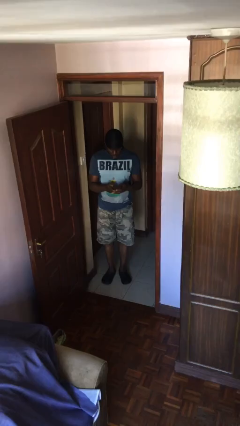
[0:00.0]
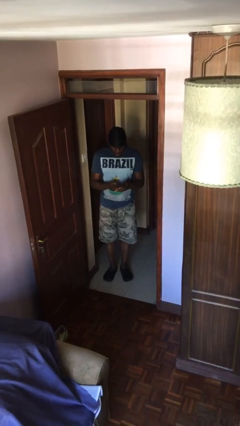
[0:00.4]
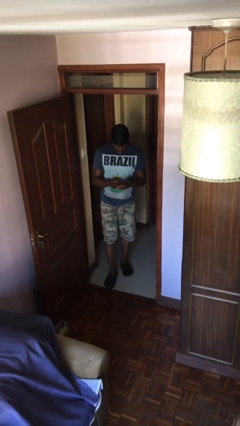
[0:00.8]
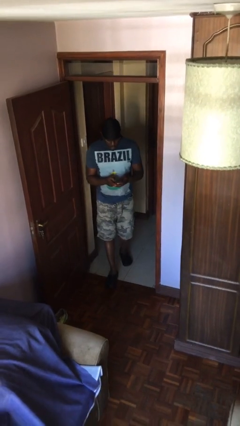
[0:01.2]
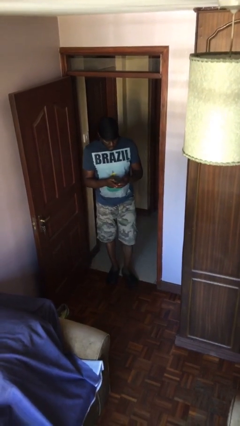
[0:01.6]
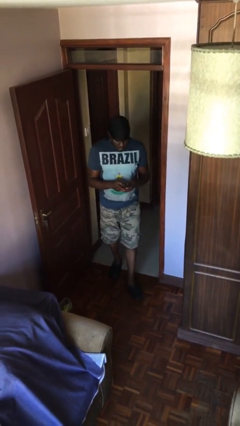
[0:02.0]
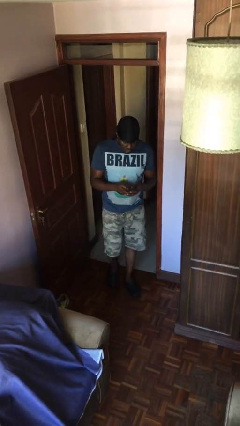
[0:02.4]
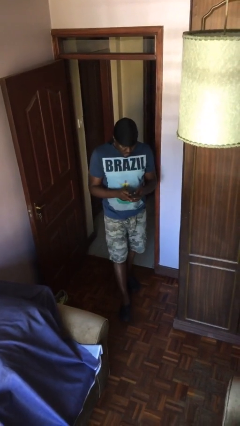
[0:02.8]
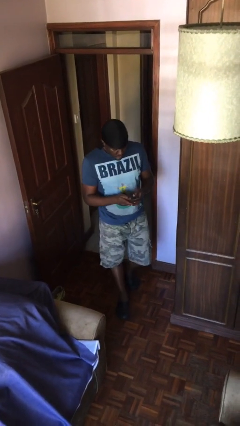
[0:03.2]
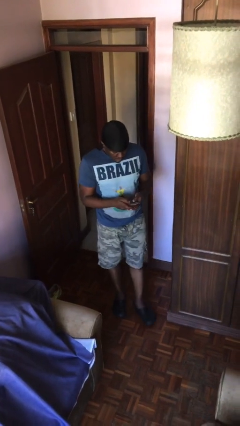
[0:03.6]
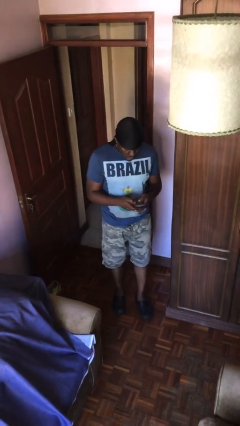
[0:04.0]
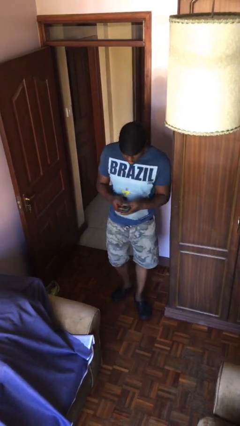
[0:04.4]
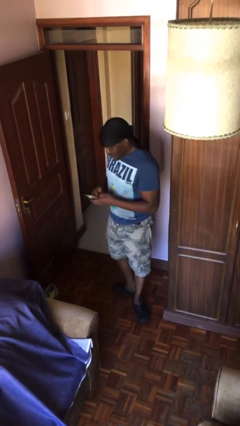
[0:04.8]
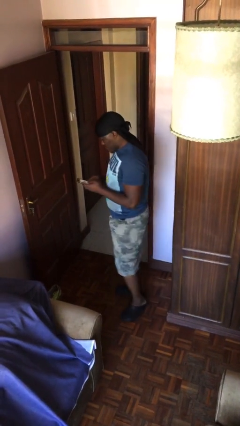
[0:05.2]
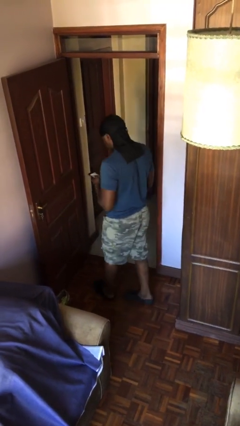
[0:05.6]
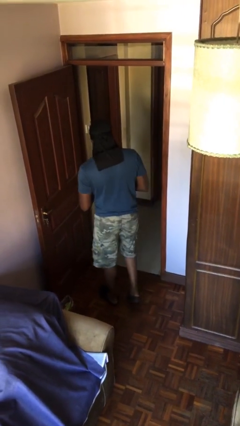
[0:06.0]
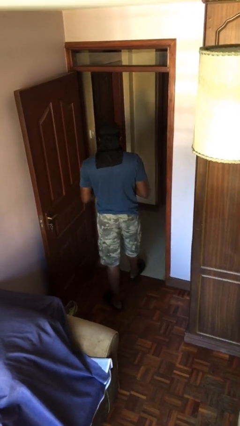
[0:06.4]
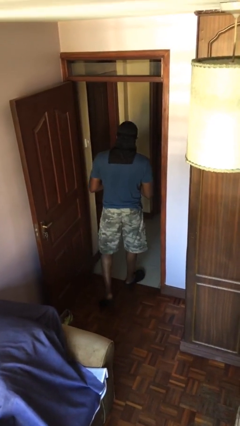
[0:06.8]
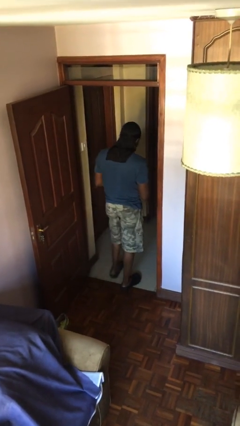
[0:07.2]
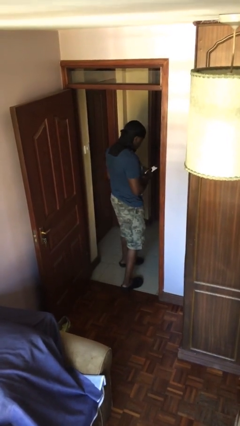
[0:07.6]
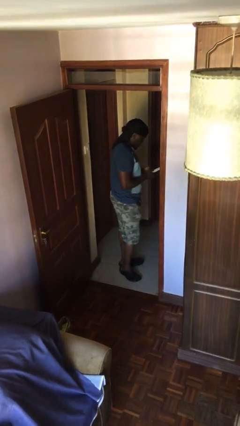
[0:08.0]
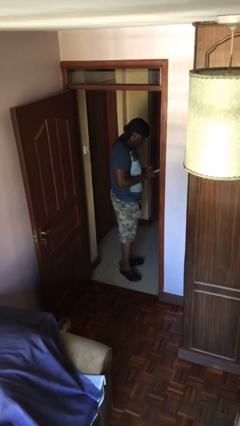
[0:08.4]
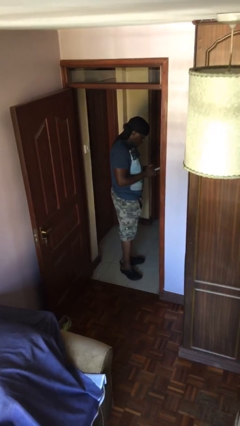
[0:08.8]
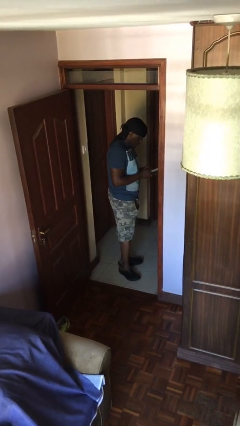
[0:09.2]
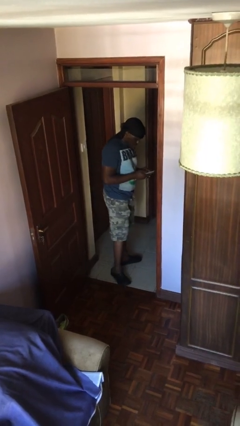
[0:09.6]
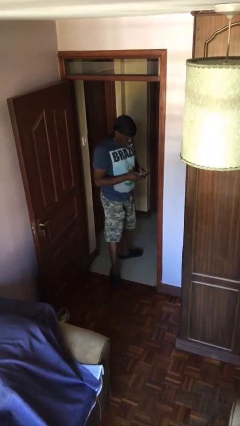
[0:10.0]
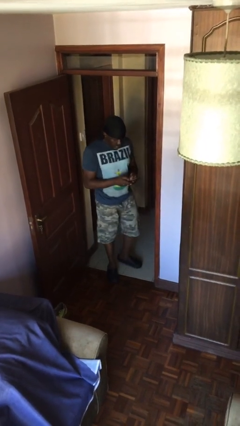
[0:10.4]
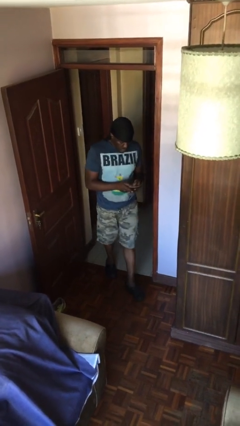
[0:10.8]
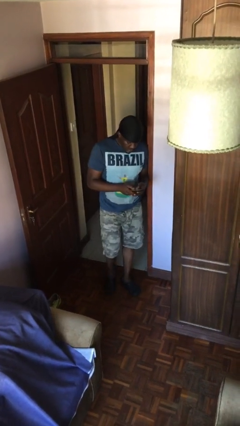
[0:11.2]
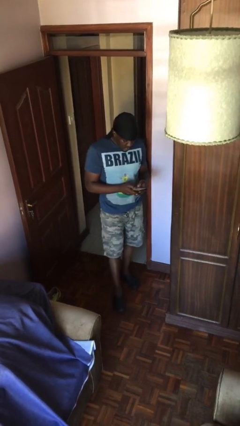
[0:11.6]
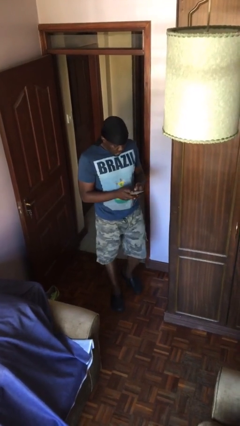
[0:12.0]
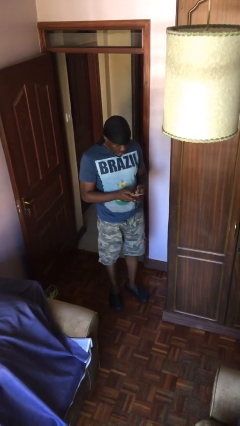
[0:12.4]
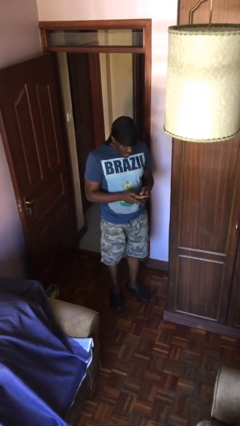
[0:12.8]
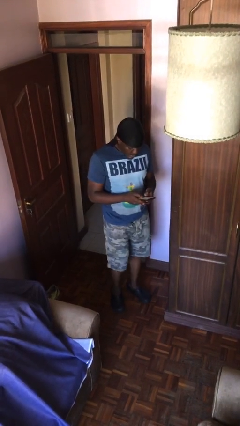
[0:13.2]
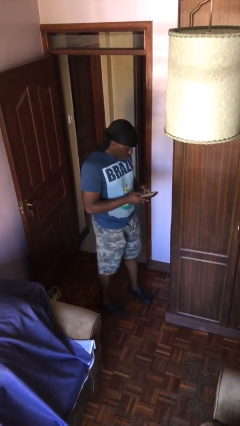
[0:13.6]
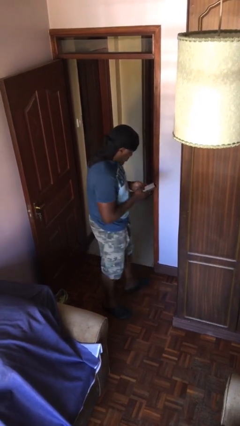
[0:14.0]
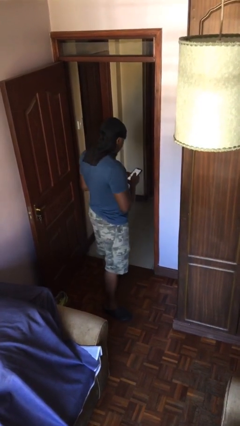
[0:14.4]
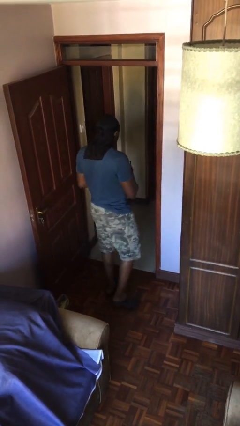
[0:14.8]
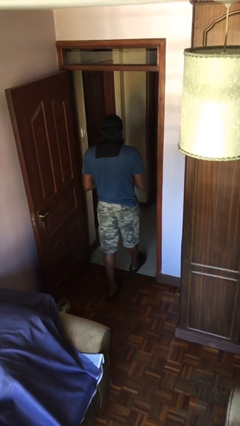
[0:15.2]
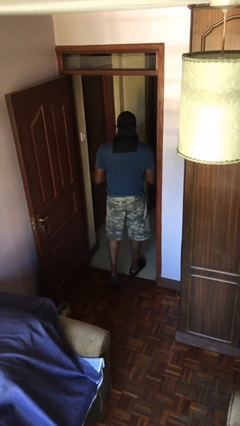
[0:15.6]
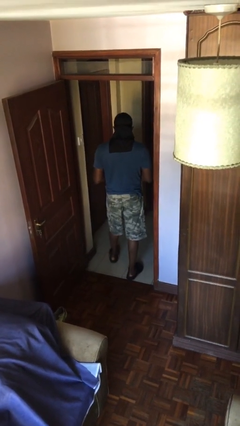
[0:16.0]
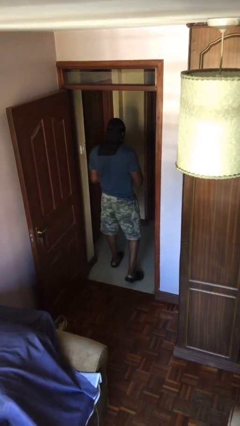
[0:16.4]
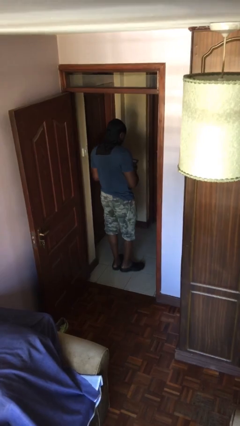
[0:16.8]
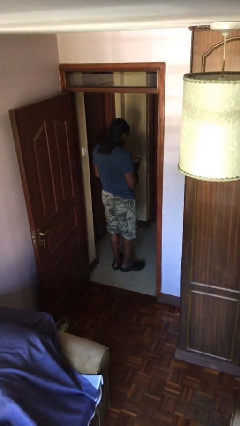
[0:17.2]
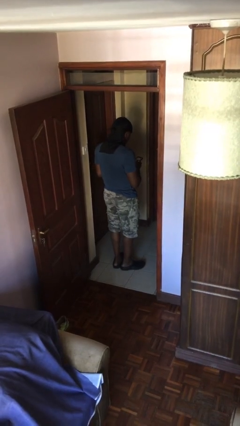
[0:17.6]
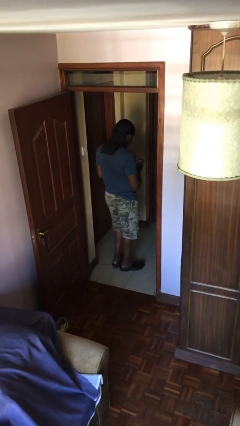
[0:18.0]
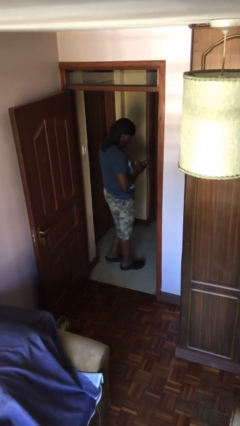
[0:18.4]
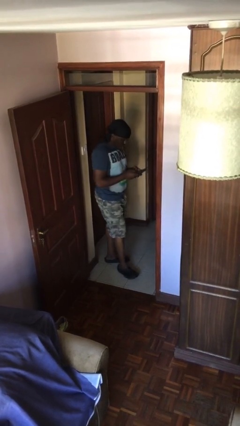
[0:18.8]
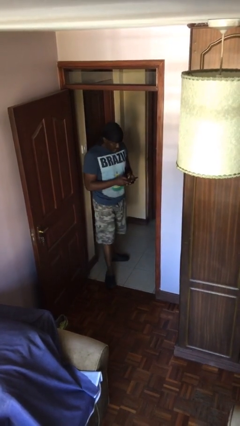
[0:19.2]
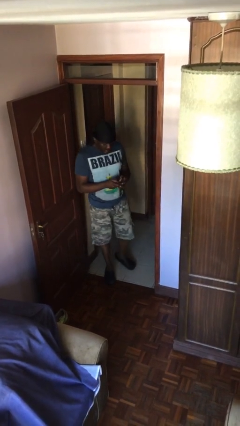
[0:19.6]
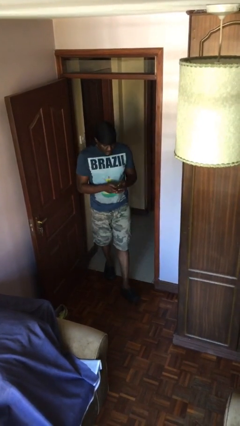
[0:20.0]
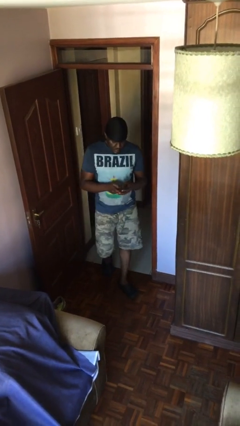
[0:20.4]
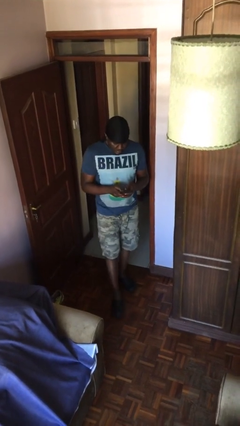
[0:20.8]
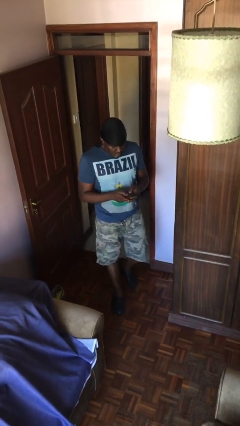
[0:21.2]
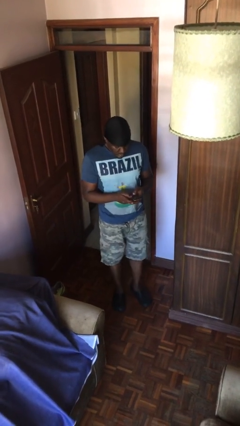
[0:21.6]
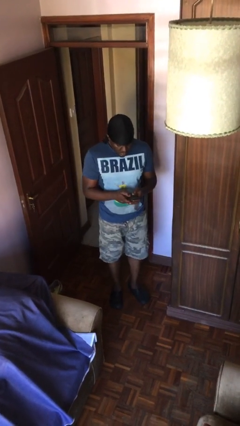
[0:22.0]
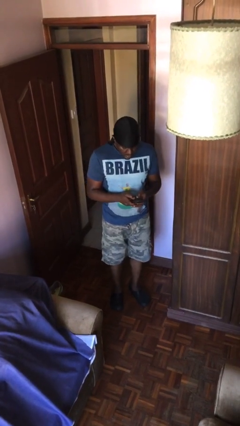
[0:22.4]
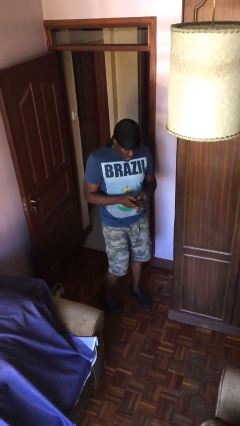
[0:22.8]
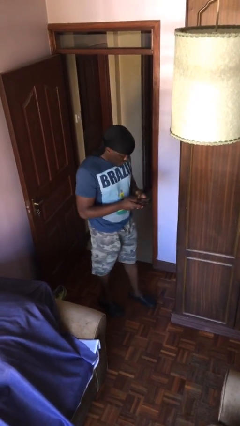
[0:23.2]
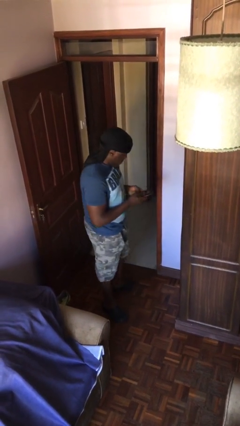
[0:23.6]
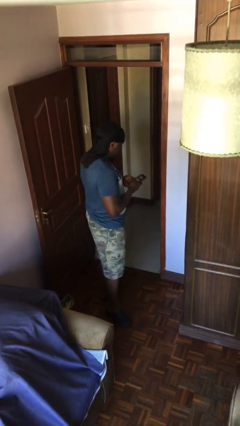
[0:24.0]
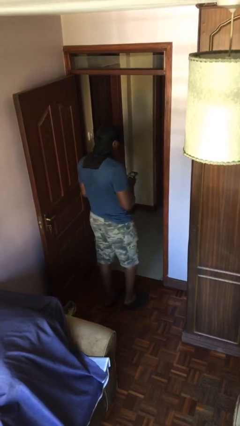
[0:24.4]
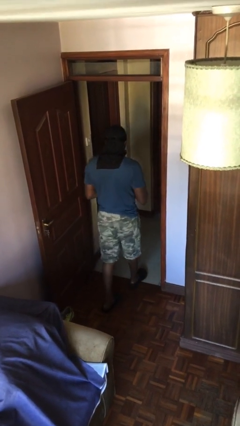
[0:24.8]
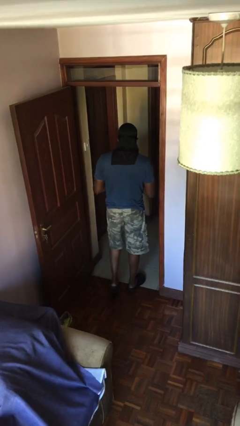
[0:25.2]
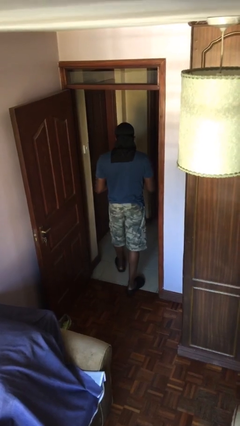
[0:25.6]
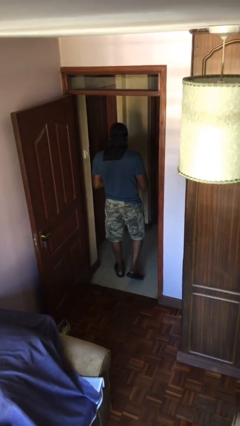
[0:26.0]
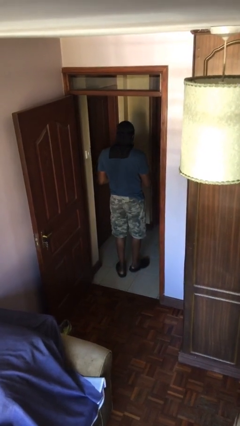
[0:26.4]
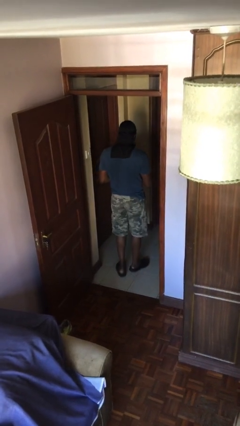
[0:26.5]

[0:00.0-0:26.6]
person texts on phone

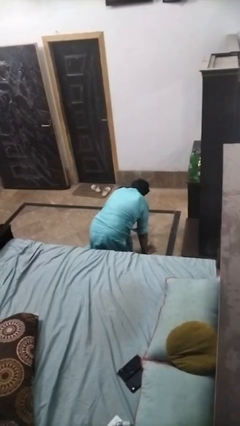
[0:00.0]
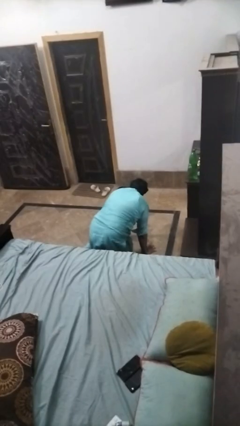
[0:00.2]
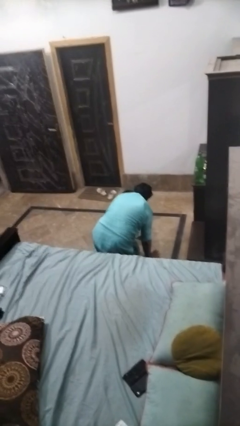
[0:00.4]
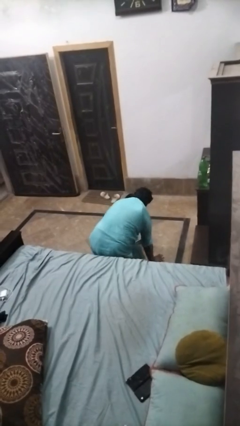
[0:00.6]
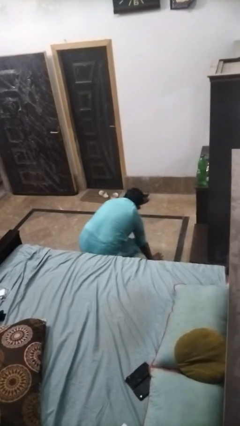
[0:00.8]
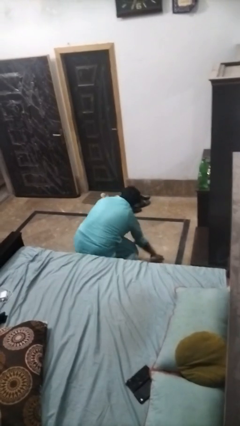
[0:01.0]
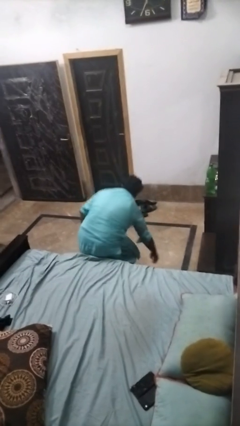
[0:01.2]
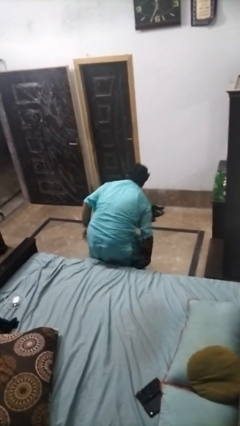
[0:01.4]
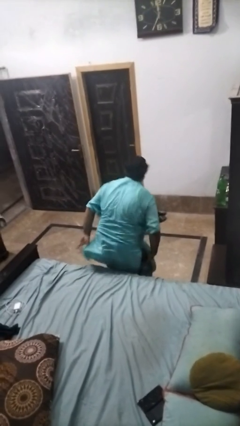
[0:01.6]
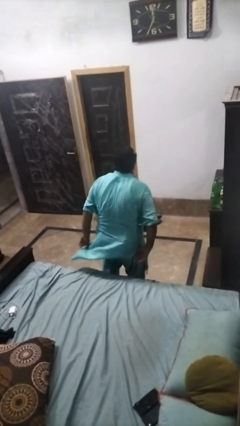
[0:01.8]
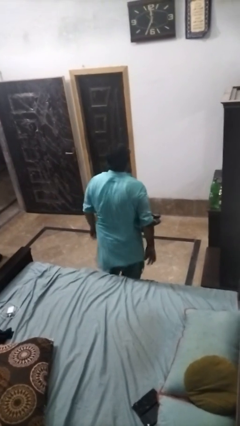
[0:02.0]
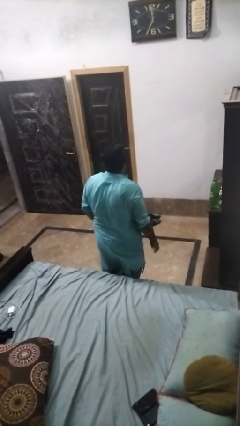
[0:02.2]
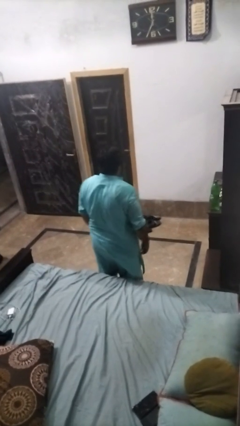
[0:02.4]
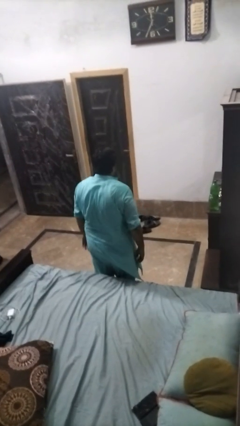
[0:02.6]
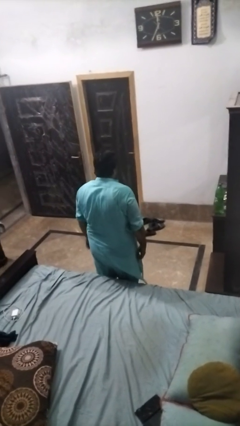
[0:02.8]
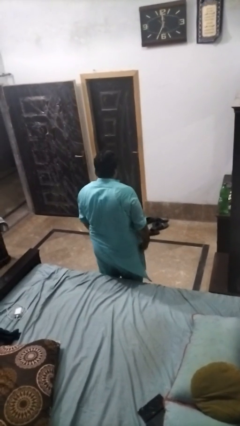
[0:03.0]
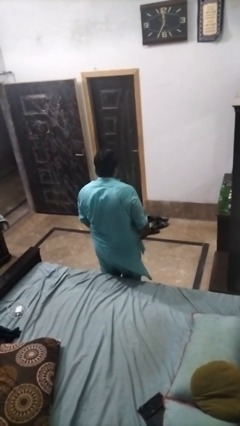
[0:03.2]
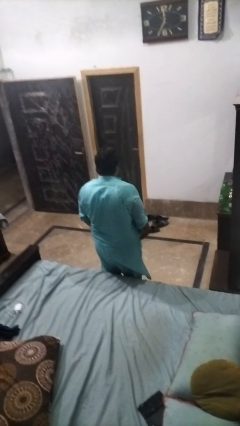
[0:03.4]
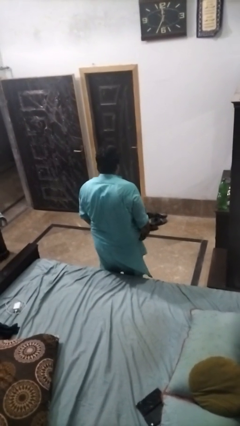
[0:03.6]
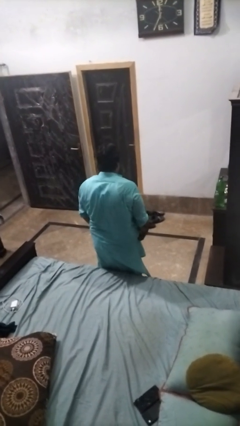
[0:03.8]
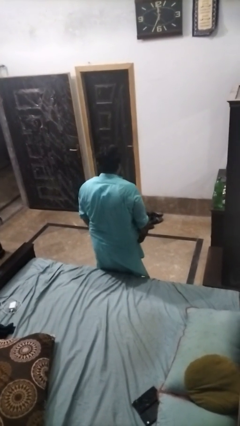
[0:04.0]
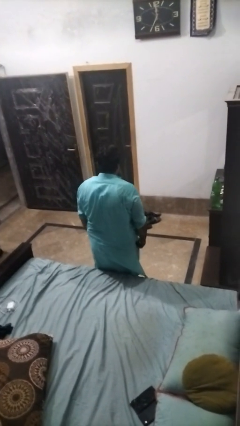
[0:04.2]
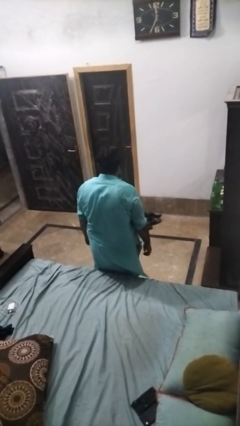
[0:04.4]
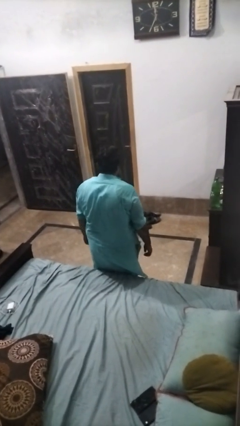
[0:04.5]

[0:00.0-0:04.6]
person stands up from floor
